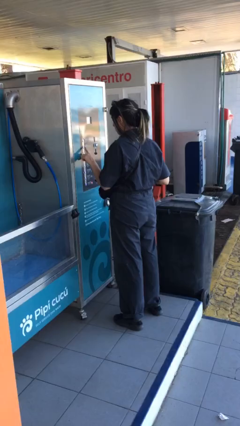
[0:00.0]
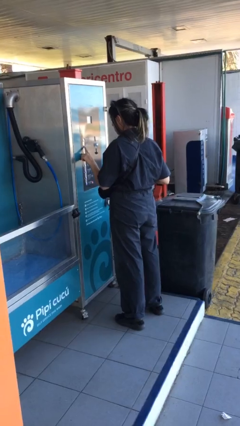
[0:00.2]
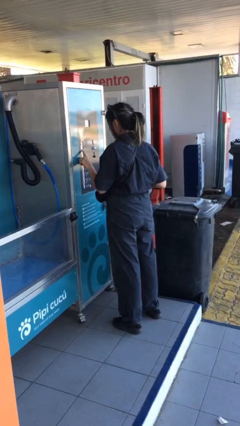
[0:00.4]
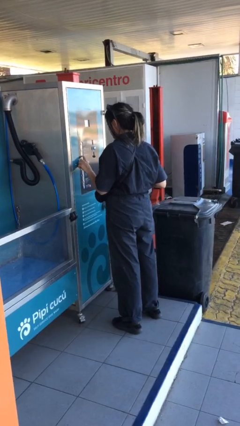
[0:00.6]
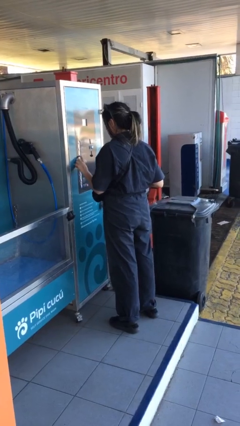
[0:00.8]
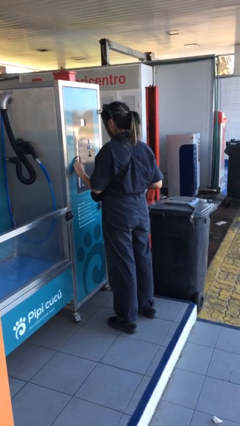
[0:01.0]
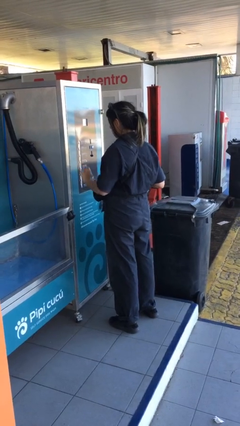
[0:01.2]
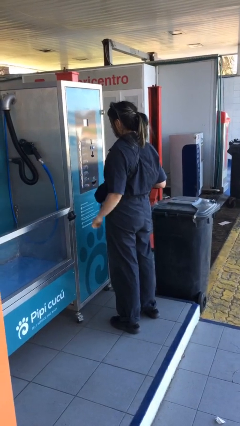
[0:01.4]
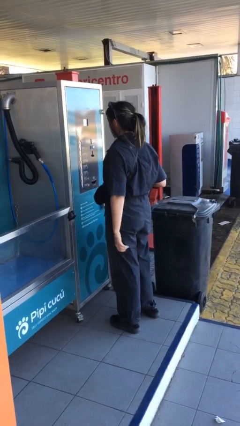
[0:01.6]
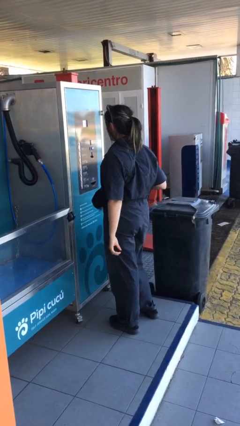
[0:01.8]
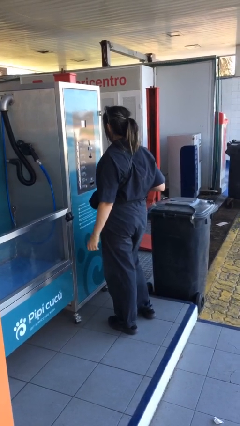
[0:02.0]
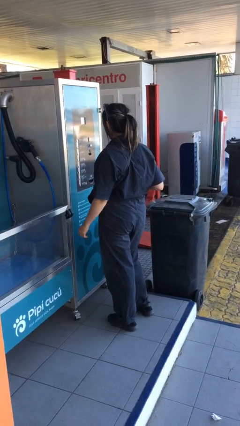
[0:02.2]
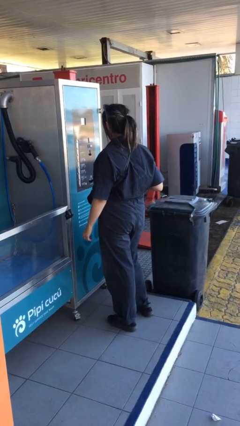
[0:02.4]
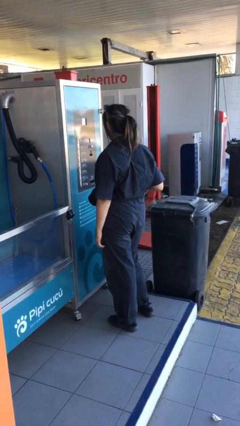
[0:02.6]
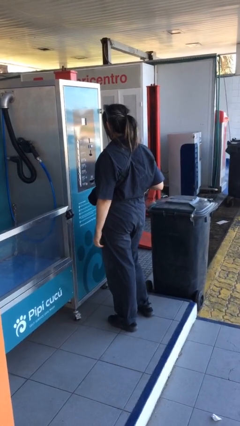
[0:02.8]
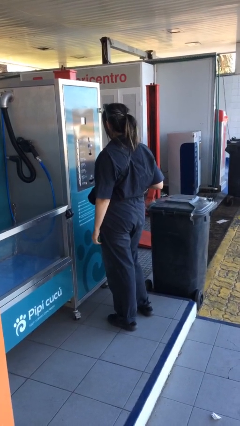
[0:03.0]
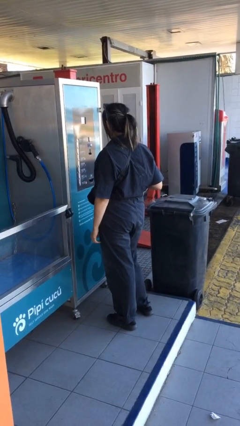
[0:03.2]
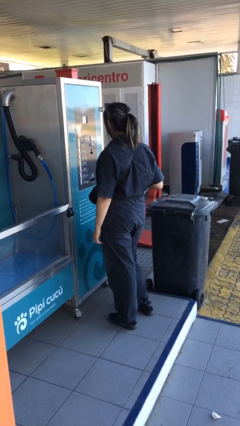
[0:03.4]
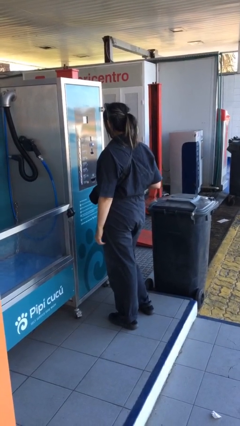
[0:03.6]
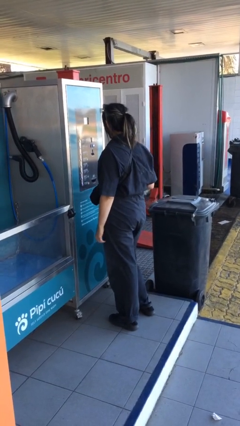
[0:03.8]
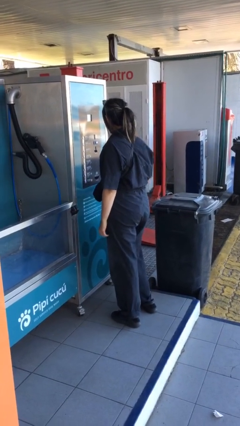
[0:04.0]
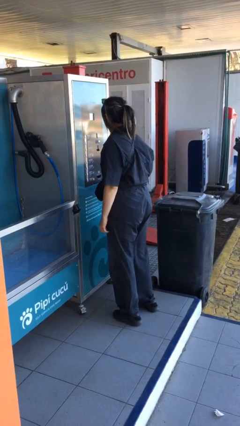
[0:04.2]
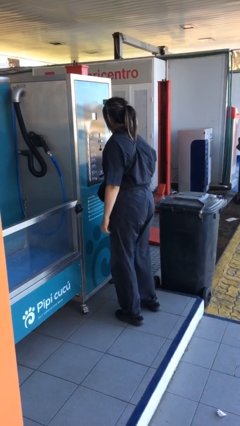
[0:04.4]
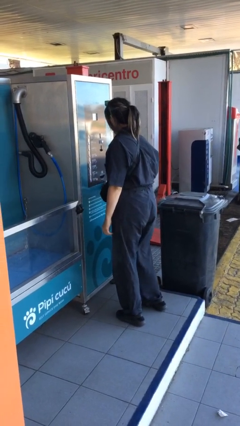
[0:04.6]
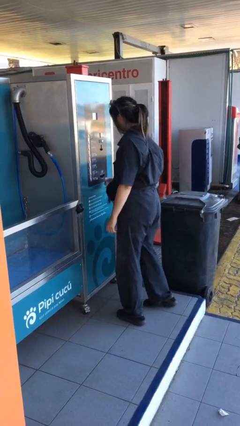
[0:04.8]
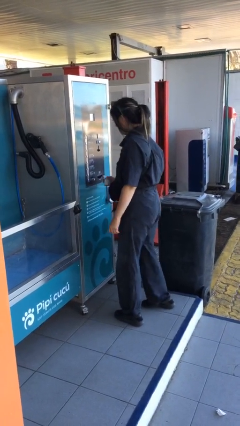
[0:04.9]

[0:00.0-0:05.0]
person purchases from machine

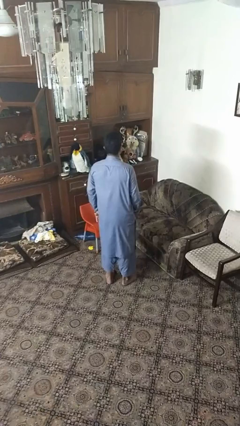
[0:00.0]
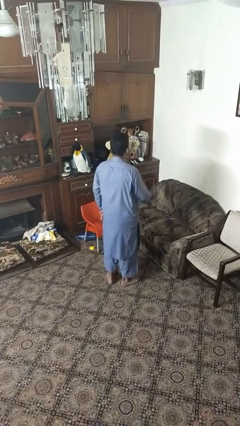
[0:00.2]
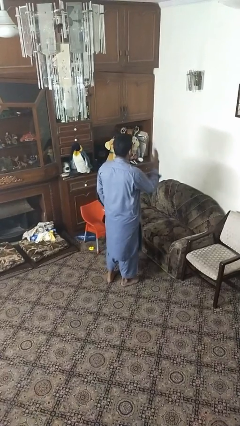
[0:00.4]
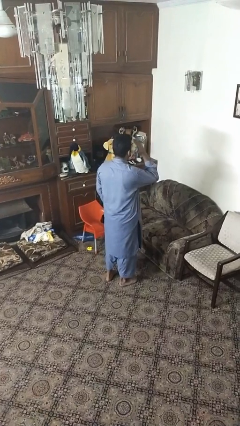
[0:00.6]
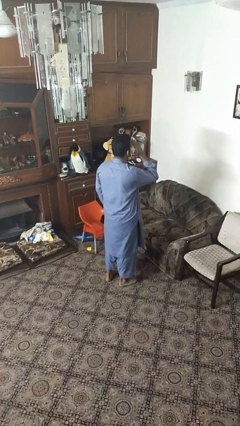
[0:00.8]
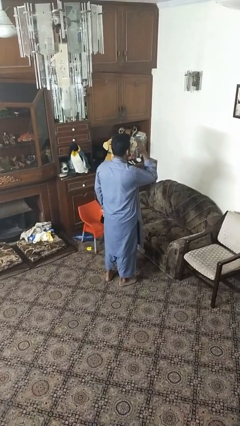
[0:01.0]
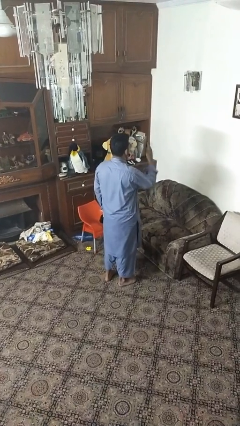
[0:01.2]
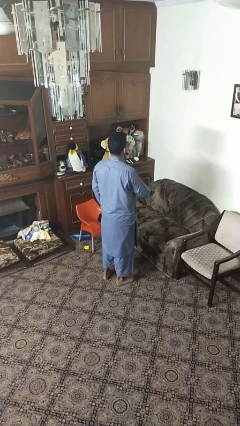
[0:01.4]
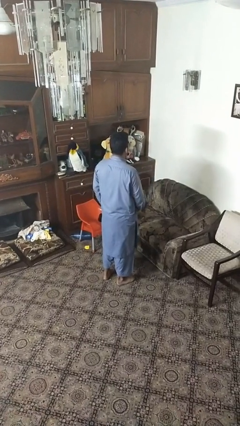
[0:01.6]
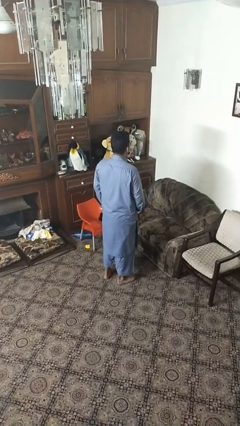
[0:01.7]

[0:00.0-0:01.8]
person salutes

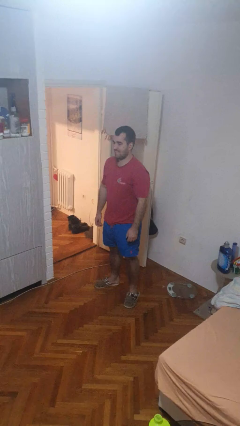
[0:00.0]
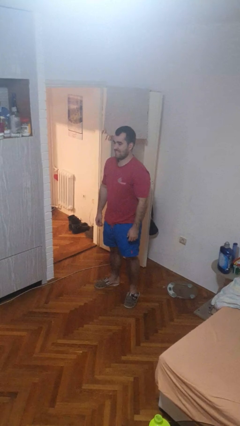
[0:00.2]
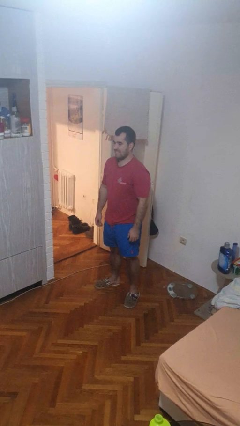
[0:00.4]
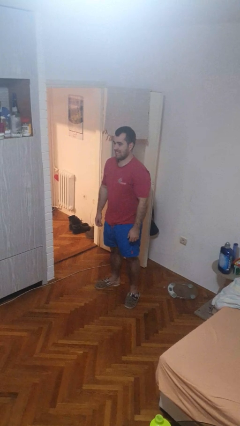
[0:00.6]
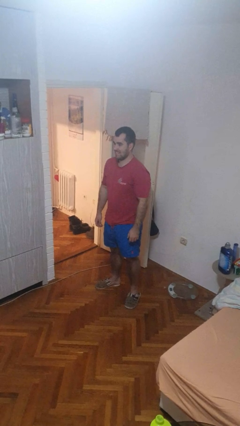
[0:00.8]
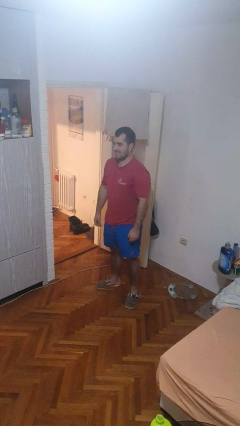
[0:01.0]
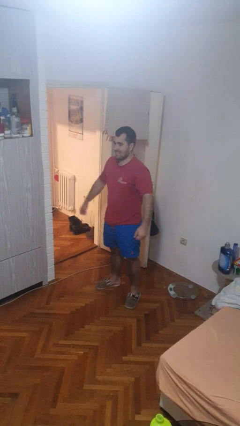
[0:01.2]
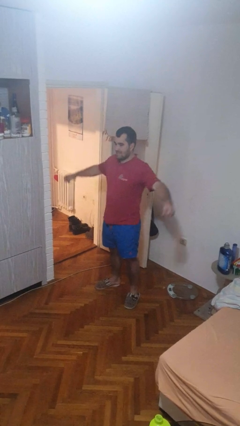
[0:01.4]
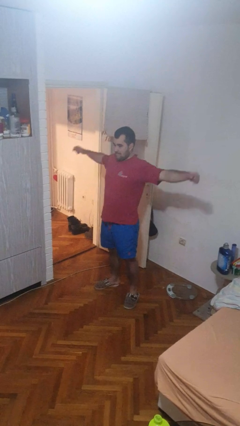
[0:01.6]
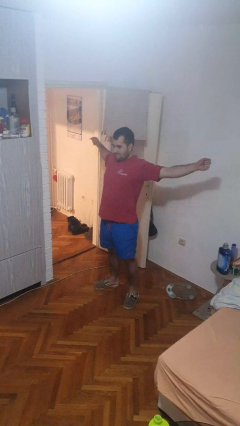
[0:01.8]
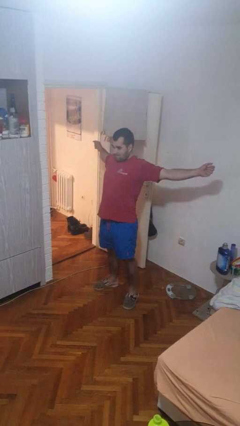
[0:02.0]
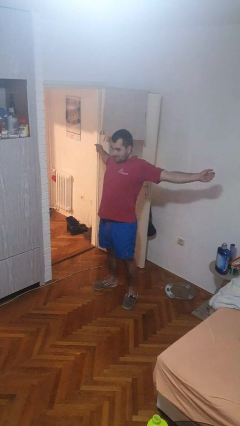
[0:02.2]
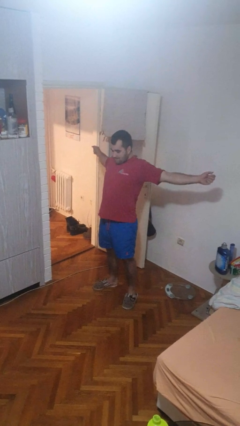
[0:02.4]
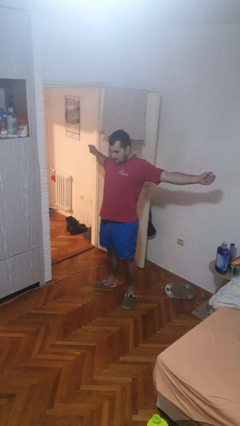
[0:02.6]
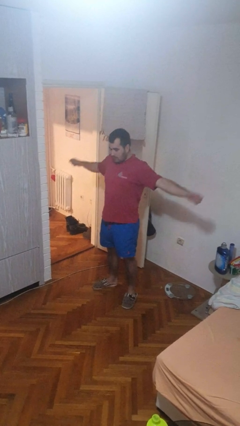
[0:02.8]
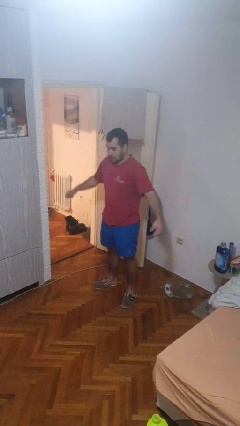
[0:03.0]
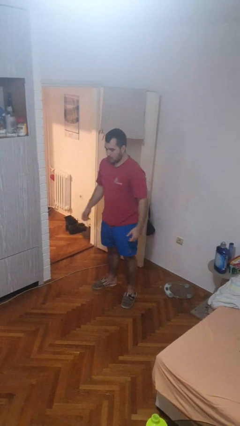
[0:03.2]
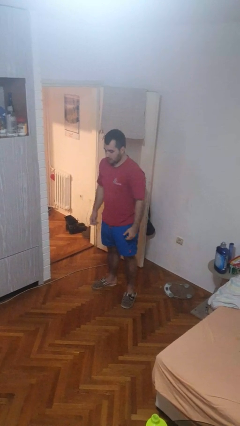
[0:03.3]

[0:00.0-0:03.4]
person stretches arms to side

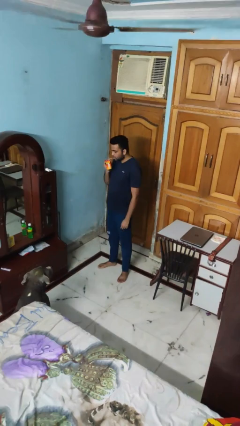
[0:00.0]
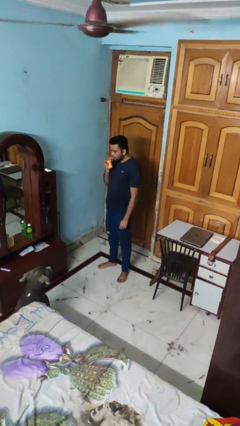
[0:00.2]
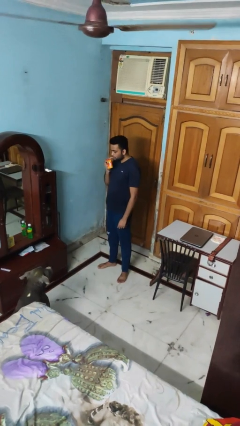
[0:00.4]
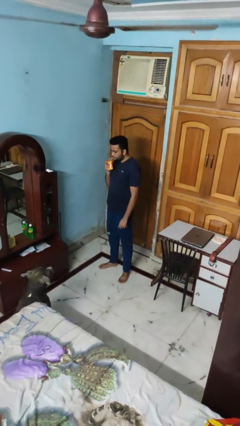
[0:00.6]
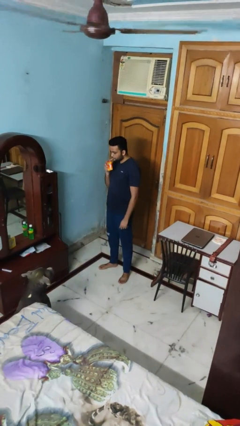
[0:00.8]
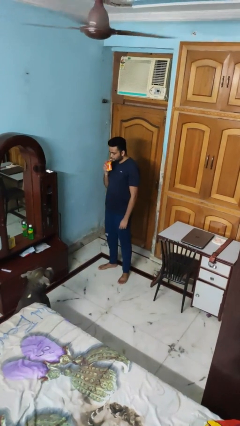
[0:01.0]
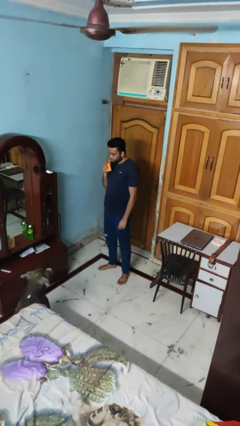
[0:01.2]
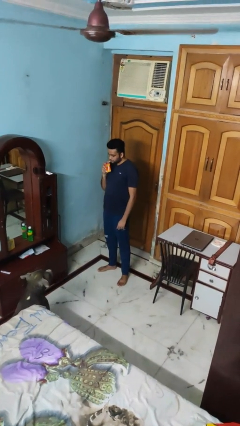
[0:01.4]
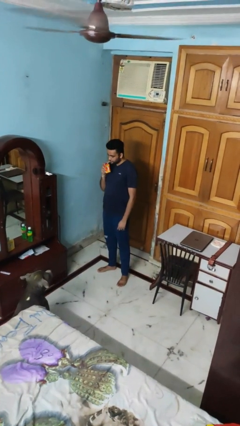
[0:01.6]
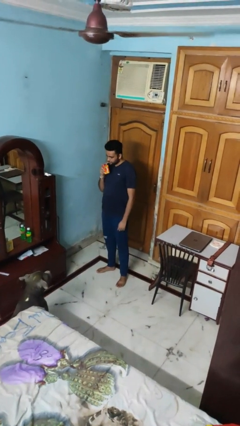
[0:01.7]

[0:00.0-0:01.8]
person drinks from straw

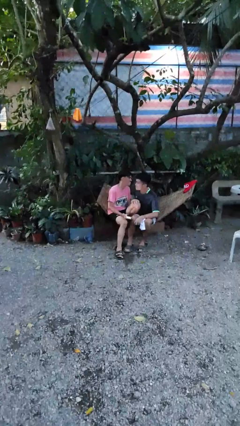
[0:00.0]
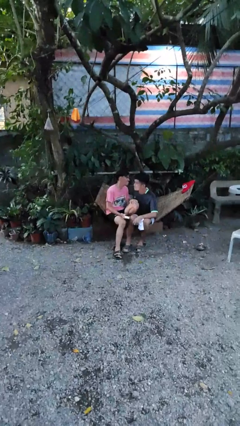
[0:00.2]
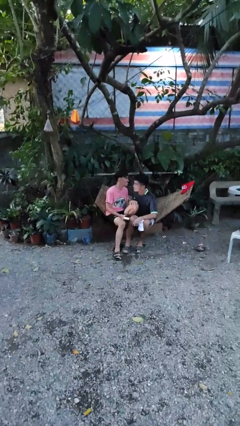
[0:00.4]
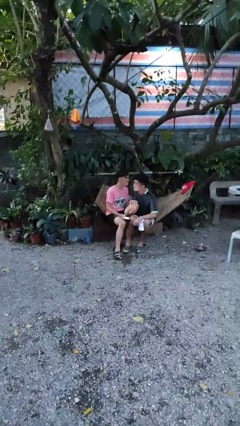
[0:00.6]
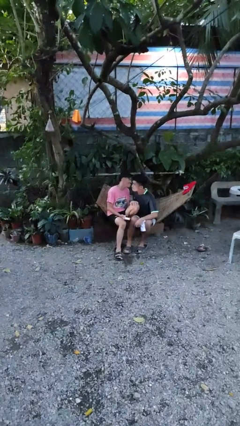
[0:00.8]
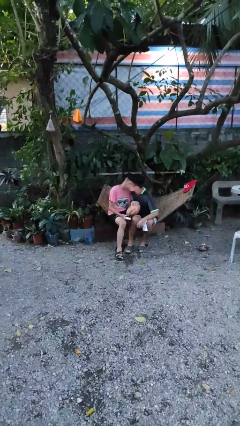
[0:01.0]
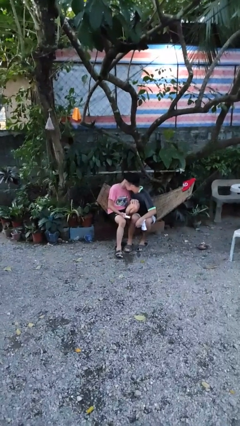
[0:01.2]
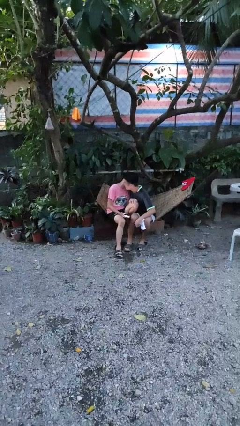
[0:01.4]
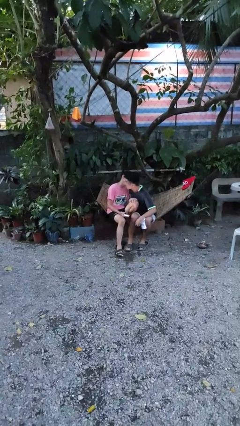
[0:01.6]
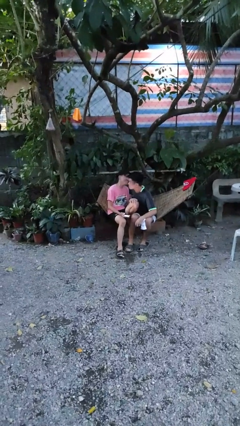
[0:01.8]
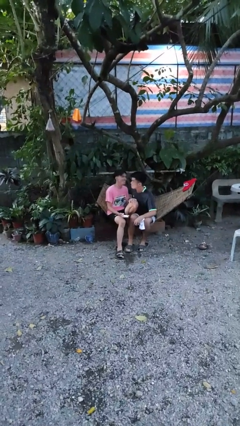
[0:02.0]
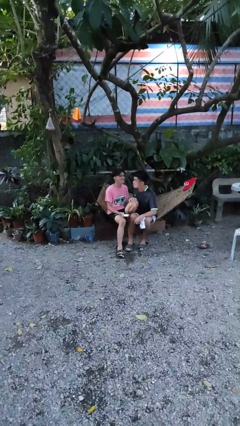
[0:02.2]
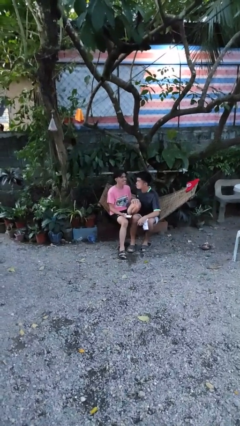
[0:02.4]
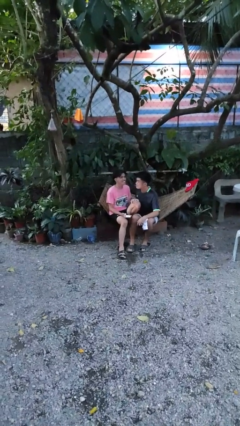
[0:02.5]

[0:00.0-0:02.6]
person kisses cheek of person

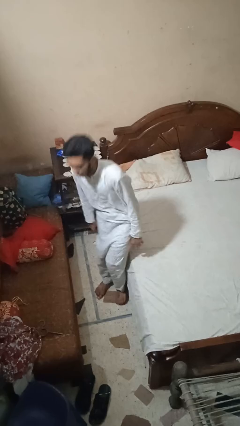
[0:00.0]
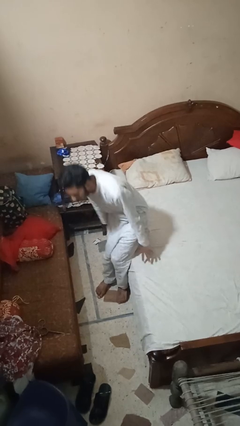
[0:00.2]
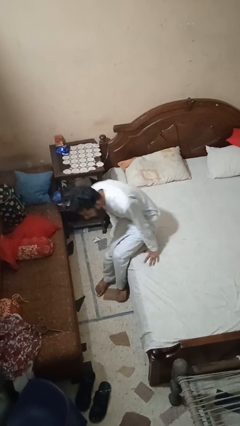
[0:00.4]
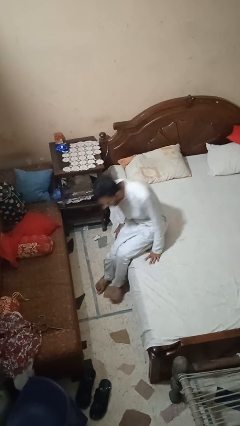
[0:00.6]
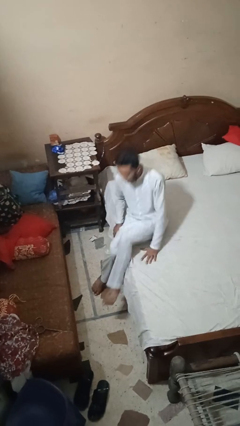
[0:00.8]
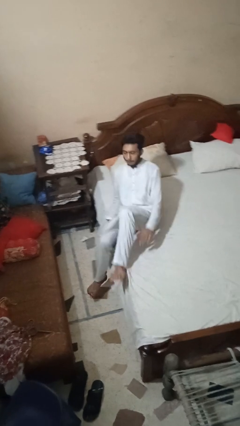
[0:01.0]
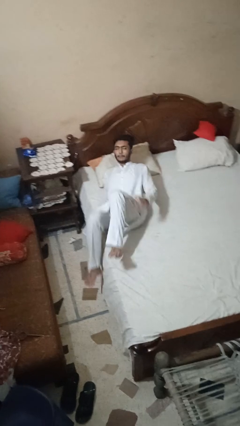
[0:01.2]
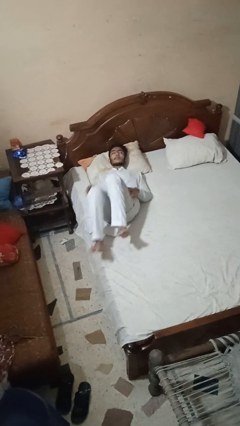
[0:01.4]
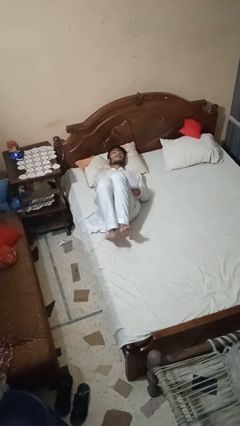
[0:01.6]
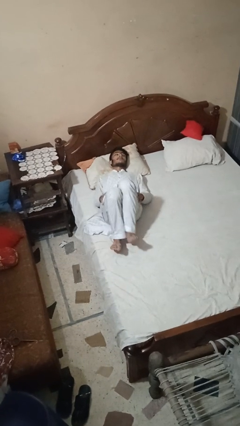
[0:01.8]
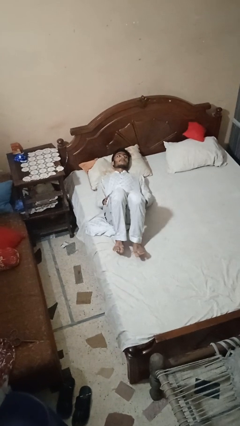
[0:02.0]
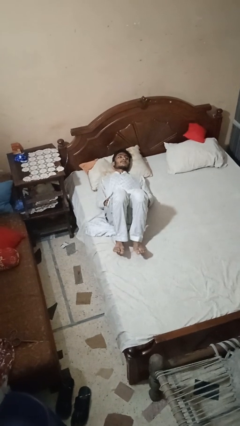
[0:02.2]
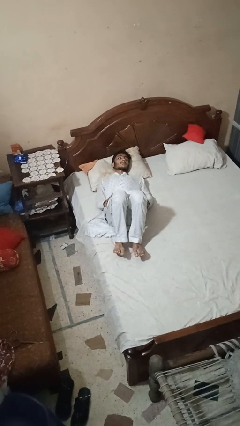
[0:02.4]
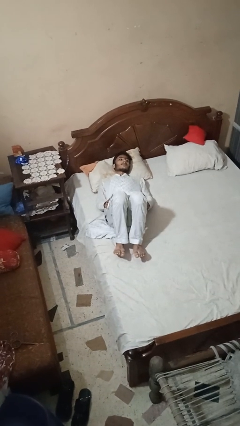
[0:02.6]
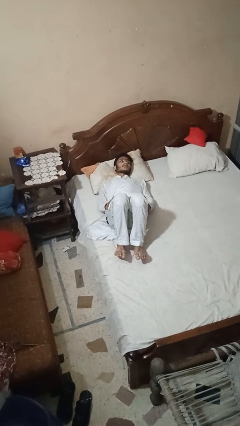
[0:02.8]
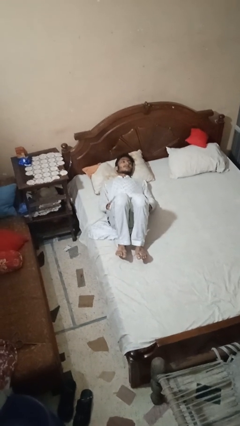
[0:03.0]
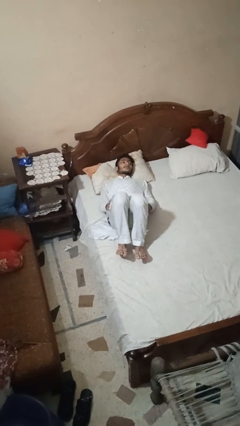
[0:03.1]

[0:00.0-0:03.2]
person lies down on bed
